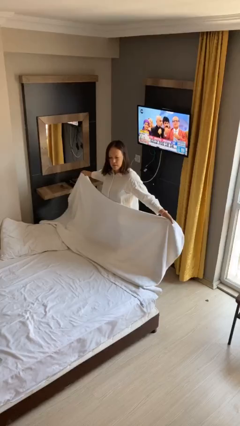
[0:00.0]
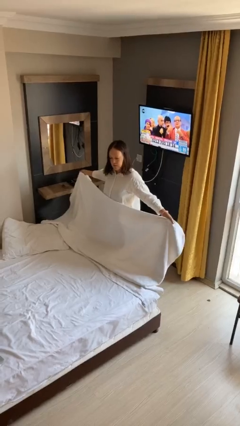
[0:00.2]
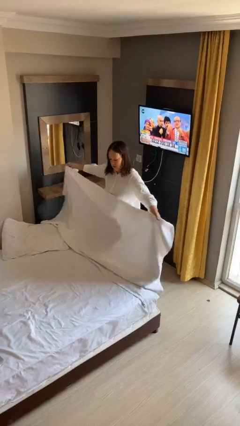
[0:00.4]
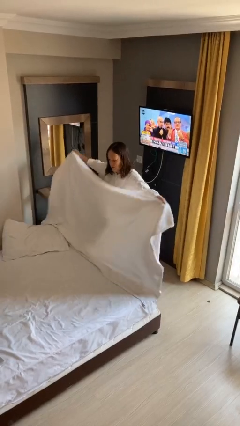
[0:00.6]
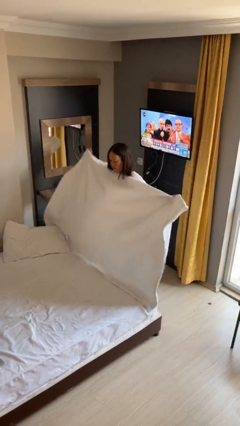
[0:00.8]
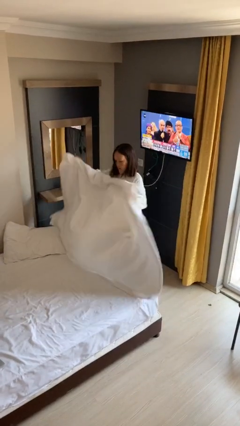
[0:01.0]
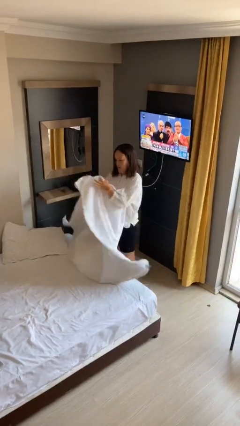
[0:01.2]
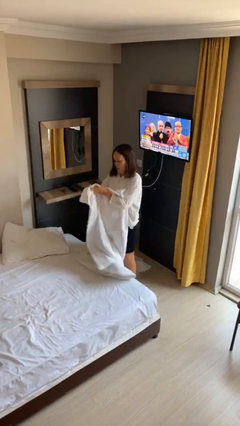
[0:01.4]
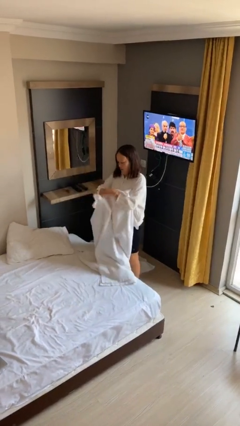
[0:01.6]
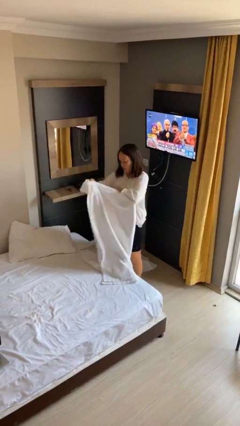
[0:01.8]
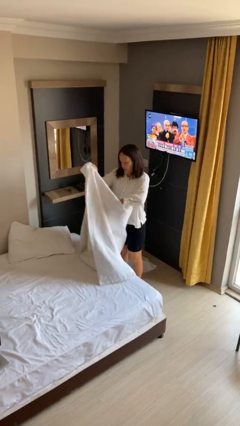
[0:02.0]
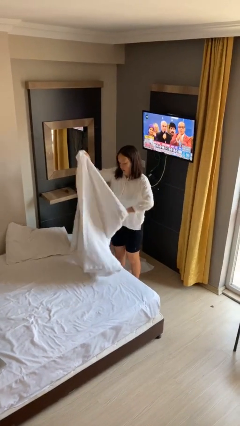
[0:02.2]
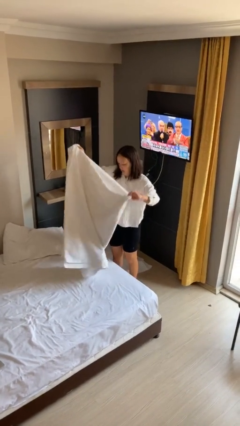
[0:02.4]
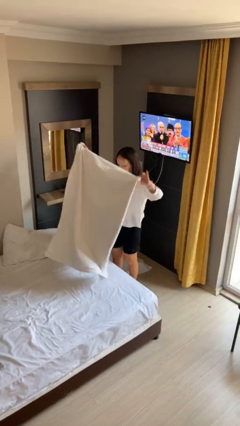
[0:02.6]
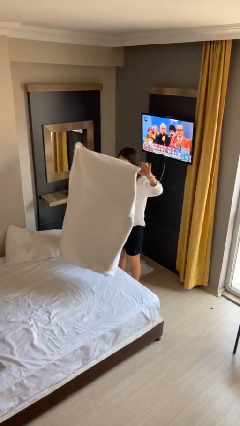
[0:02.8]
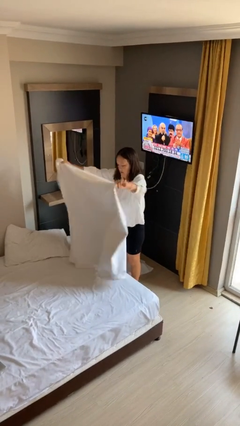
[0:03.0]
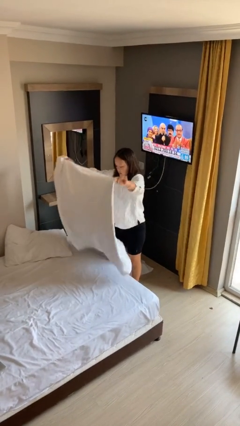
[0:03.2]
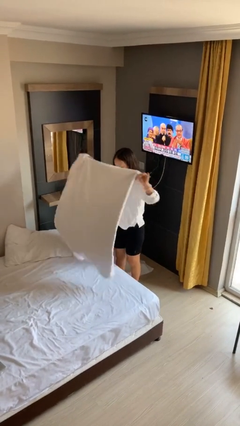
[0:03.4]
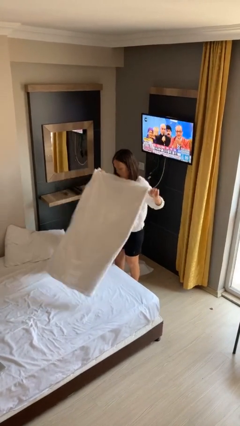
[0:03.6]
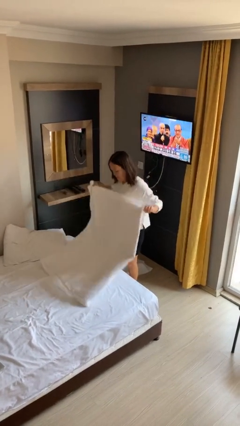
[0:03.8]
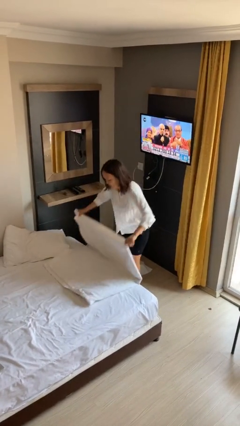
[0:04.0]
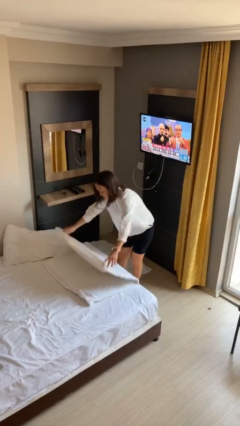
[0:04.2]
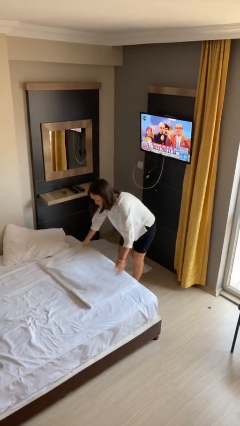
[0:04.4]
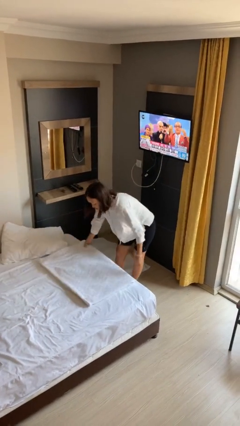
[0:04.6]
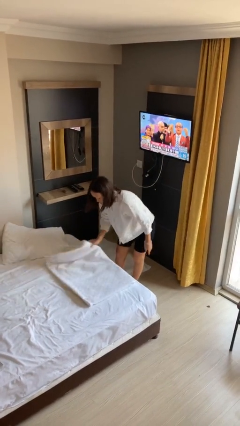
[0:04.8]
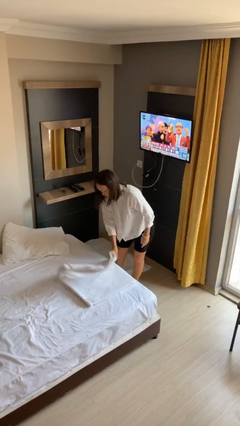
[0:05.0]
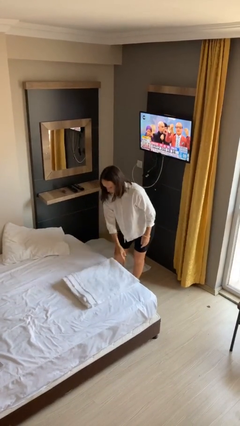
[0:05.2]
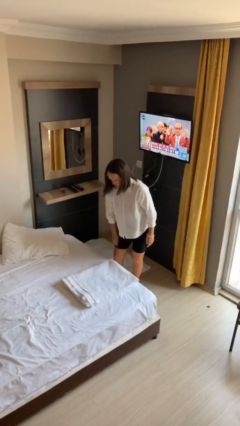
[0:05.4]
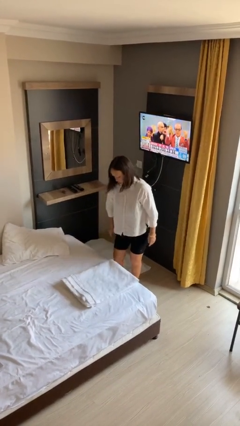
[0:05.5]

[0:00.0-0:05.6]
person folds blanket

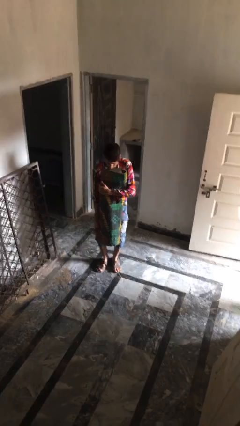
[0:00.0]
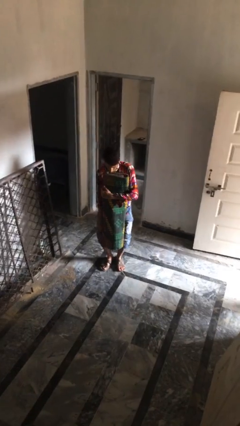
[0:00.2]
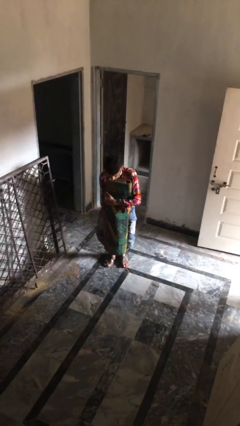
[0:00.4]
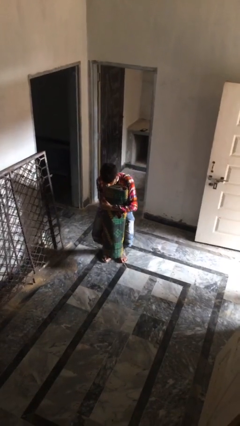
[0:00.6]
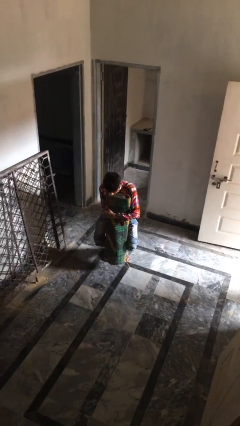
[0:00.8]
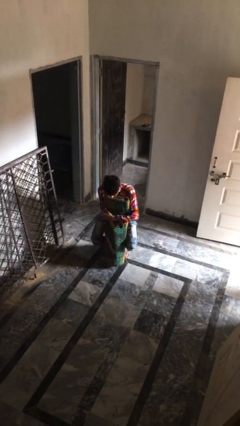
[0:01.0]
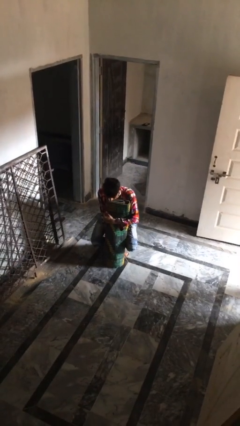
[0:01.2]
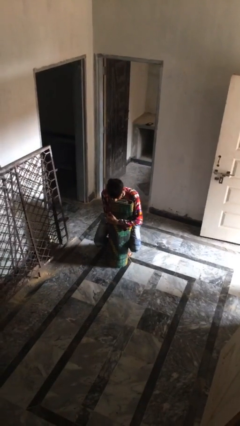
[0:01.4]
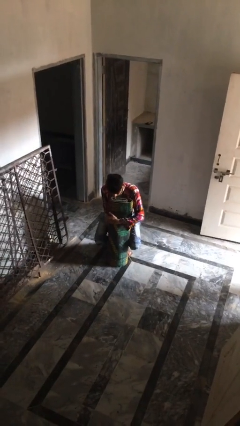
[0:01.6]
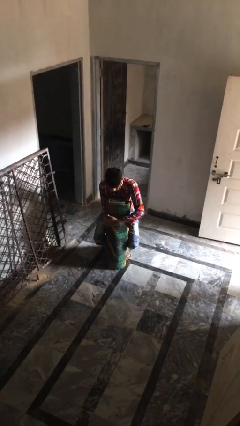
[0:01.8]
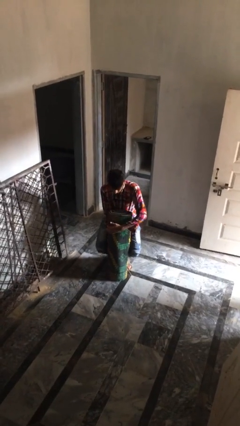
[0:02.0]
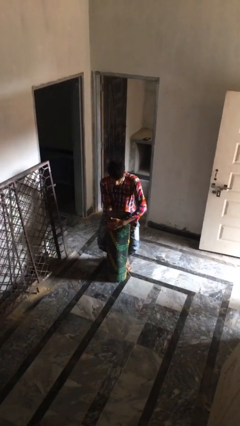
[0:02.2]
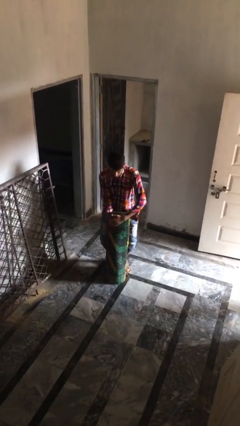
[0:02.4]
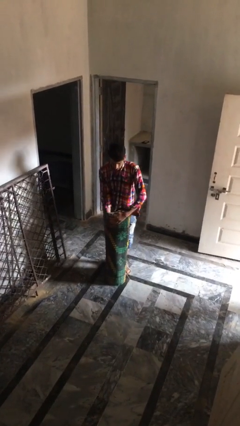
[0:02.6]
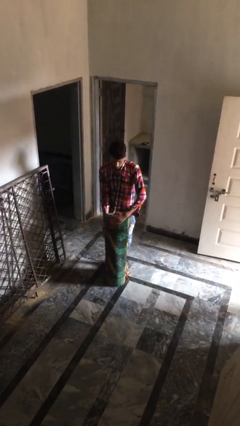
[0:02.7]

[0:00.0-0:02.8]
person puts down object on floor

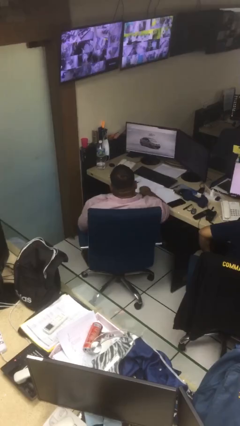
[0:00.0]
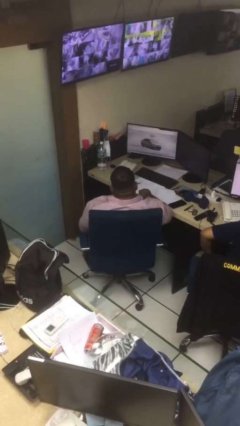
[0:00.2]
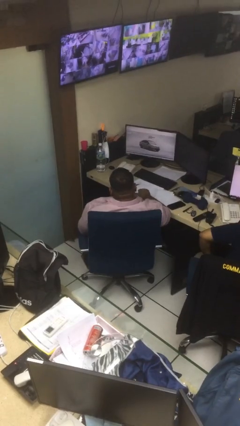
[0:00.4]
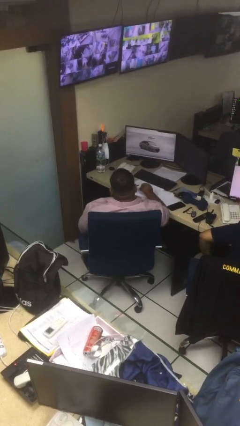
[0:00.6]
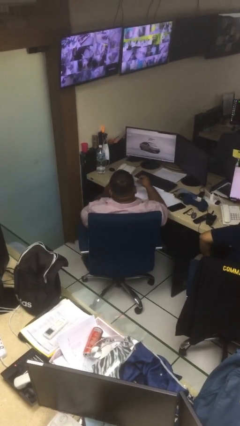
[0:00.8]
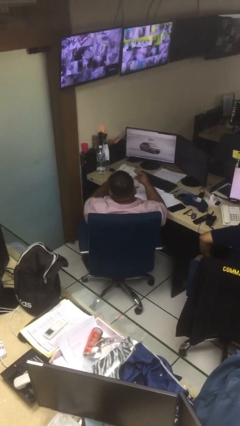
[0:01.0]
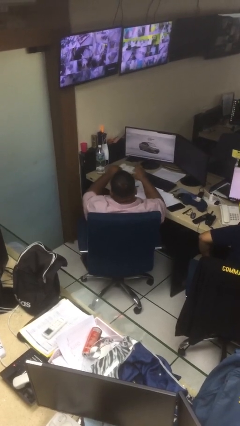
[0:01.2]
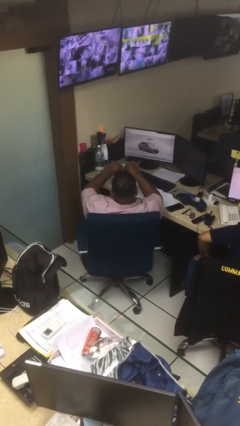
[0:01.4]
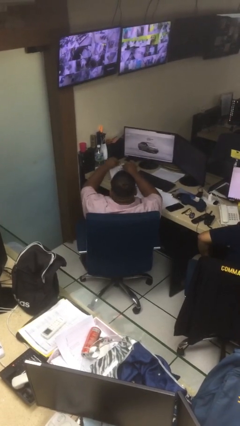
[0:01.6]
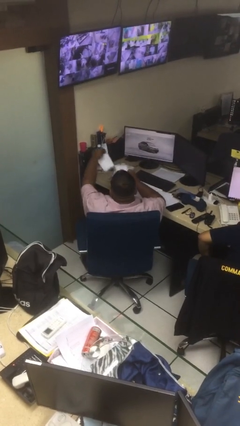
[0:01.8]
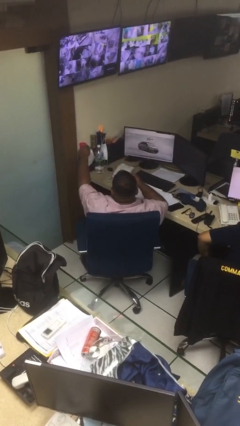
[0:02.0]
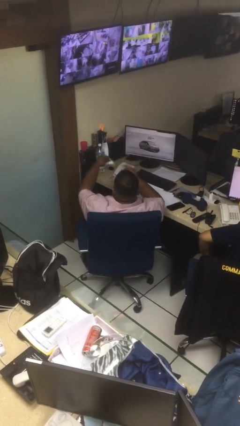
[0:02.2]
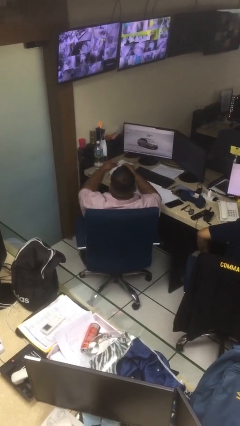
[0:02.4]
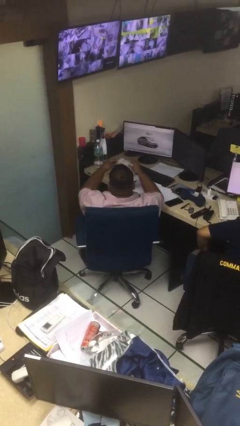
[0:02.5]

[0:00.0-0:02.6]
person tears paper

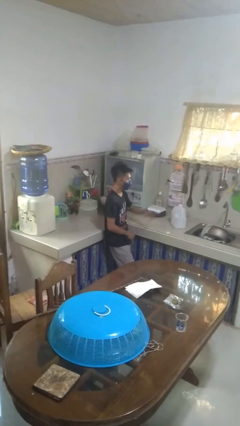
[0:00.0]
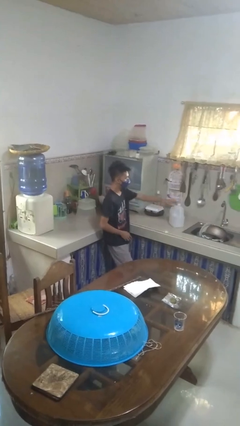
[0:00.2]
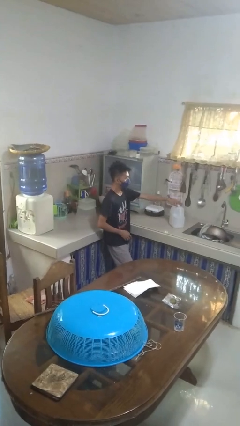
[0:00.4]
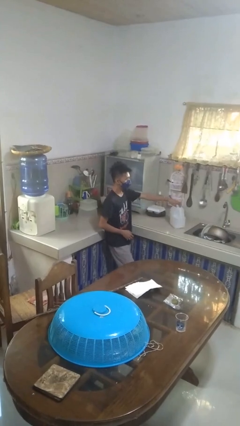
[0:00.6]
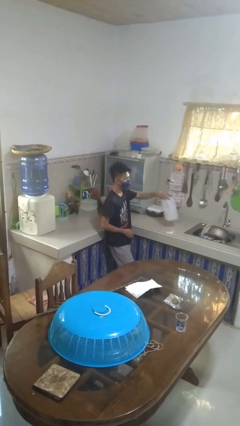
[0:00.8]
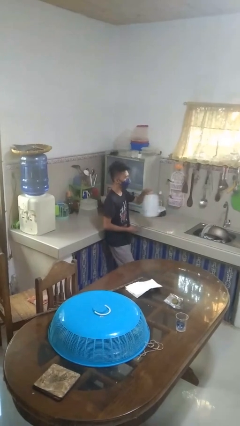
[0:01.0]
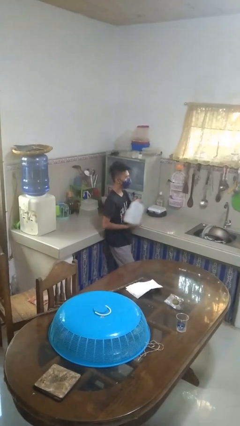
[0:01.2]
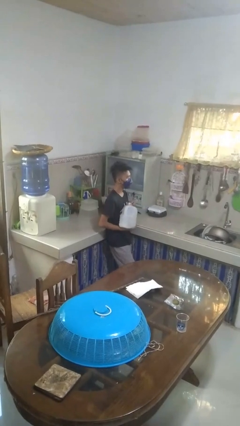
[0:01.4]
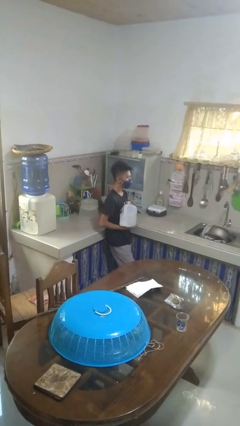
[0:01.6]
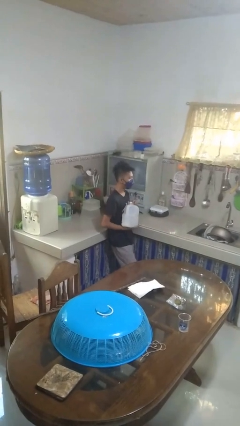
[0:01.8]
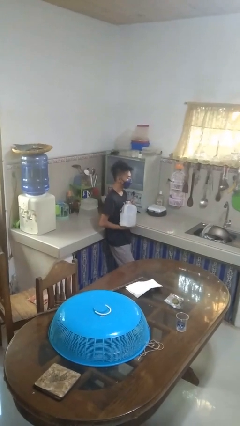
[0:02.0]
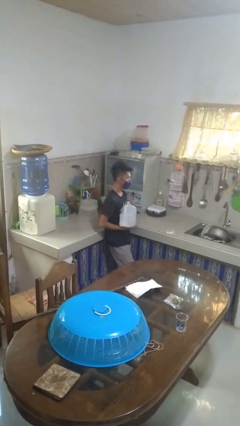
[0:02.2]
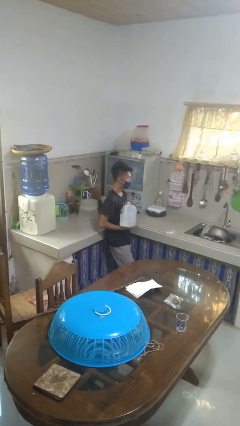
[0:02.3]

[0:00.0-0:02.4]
person picks up object from countertop

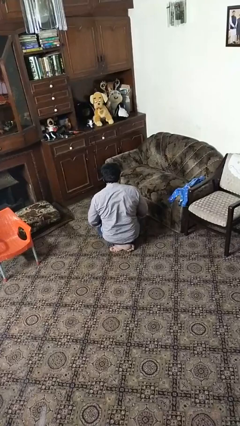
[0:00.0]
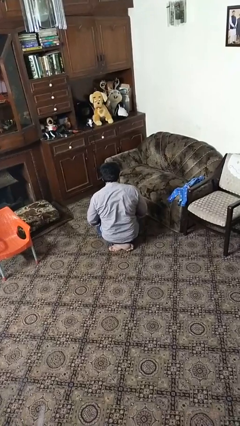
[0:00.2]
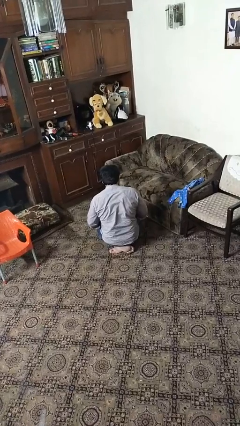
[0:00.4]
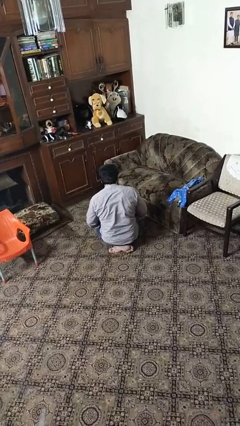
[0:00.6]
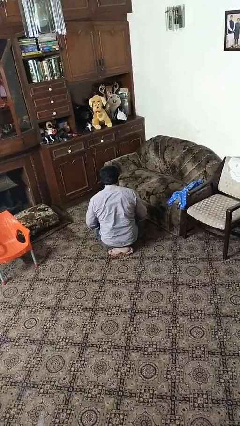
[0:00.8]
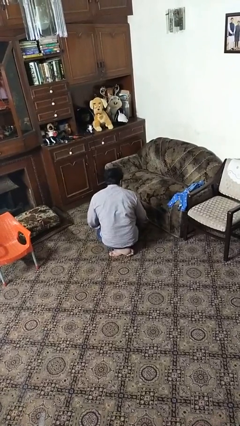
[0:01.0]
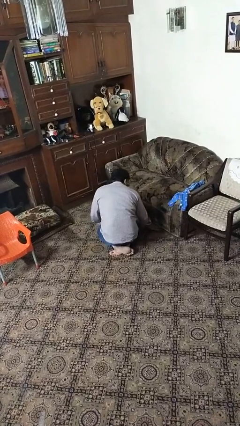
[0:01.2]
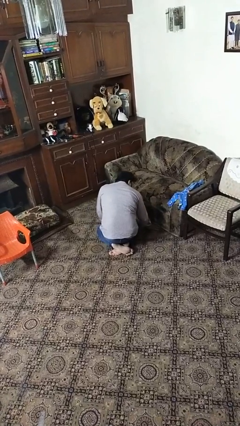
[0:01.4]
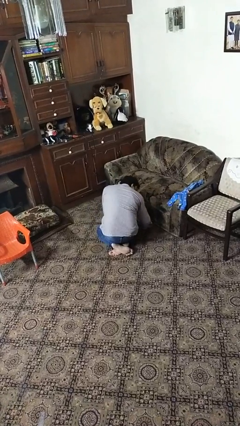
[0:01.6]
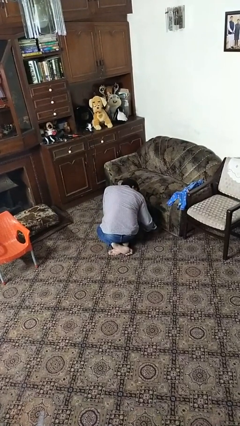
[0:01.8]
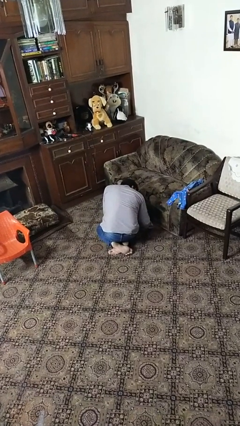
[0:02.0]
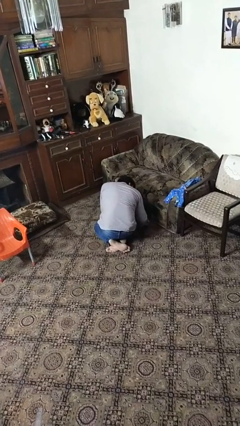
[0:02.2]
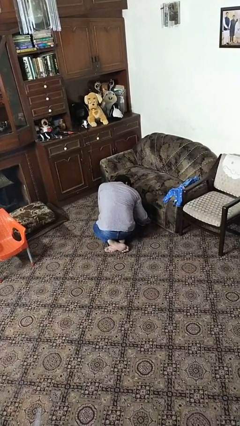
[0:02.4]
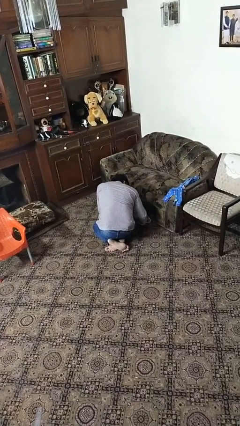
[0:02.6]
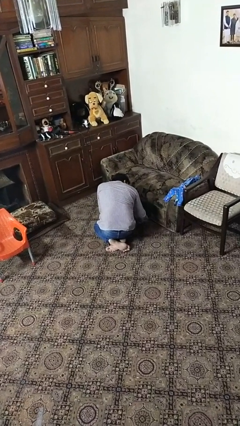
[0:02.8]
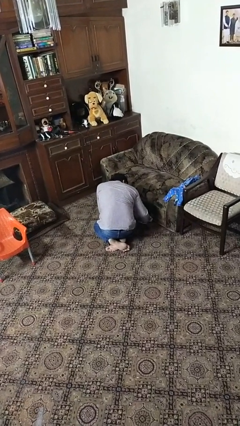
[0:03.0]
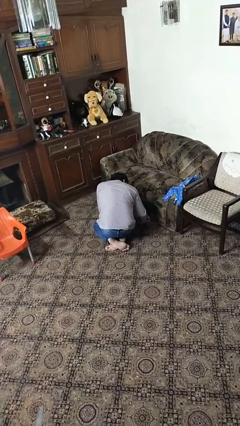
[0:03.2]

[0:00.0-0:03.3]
person searches under couch

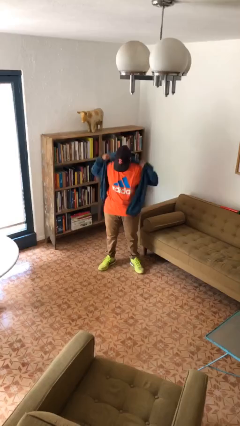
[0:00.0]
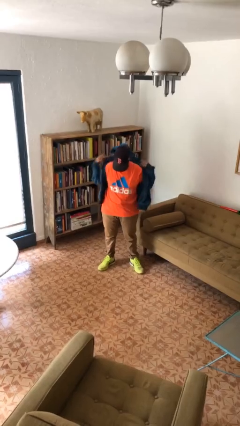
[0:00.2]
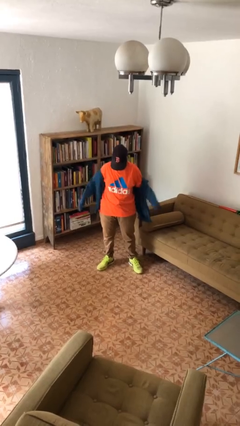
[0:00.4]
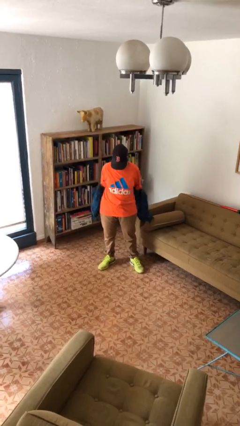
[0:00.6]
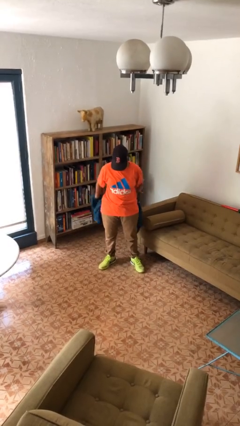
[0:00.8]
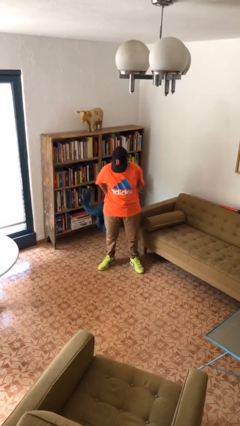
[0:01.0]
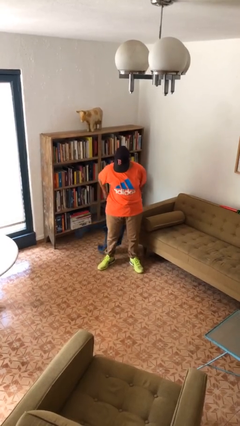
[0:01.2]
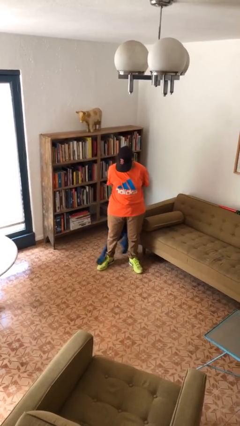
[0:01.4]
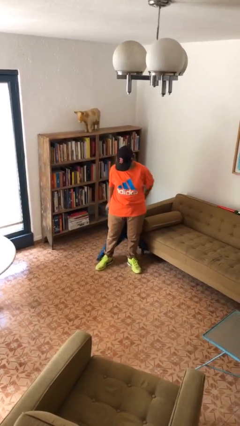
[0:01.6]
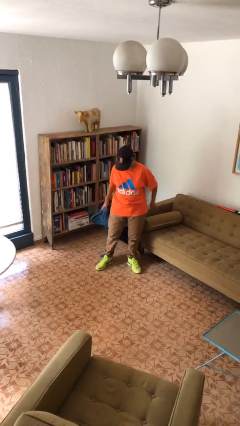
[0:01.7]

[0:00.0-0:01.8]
person takes off jacket
